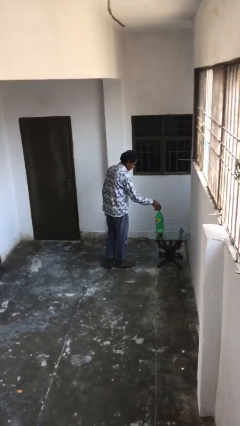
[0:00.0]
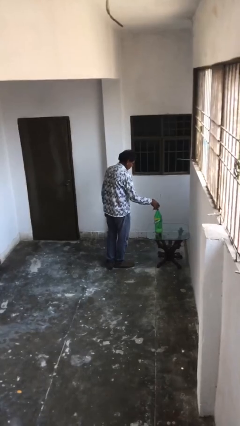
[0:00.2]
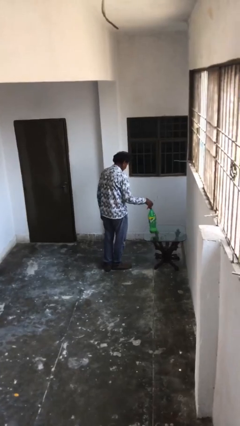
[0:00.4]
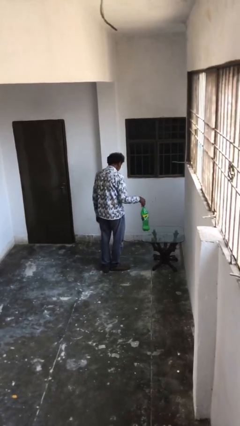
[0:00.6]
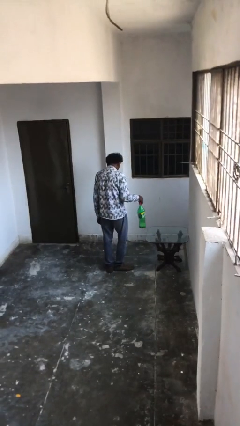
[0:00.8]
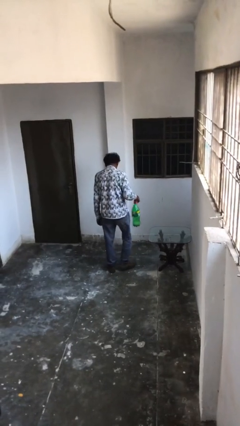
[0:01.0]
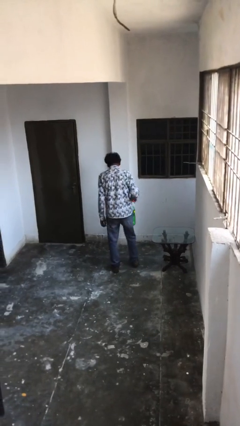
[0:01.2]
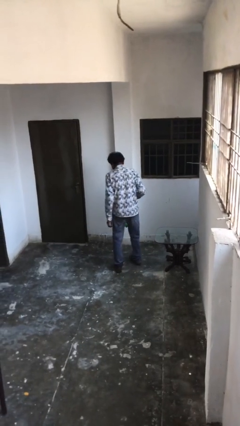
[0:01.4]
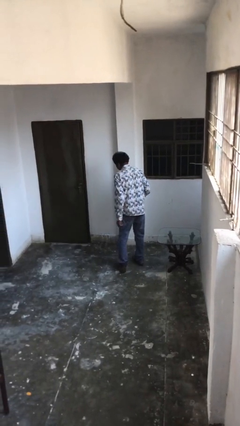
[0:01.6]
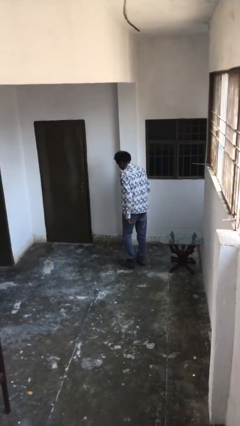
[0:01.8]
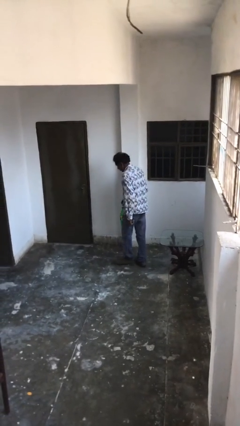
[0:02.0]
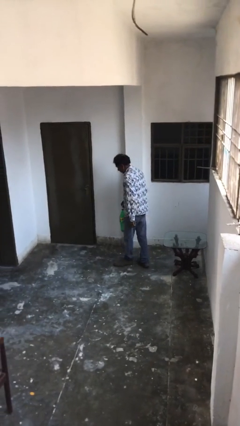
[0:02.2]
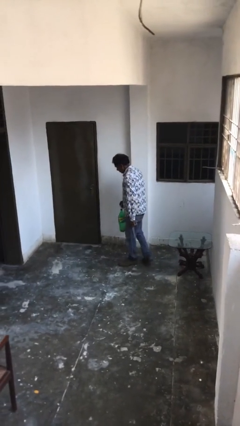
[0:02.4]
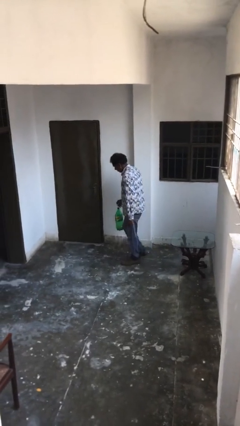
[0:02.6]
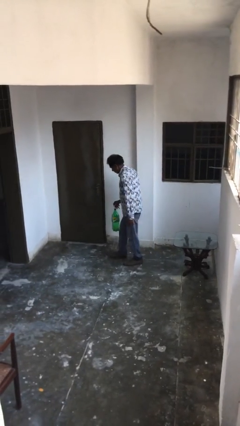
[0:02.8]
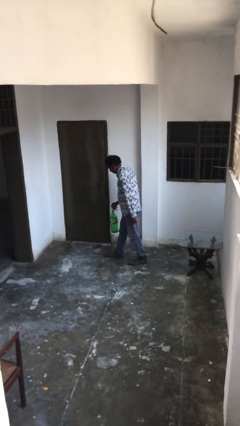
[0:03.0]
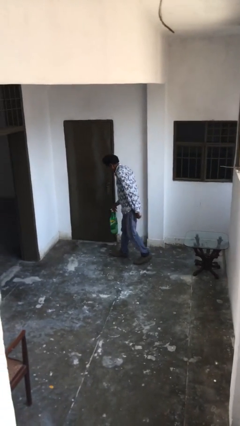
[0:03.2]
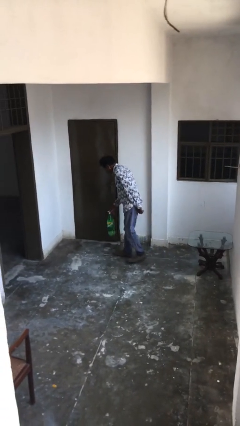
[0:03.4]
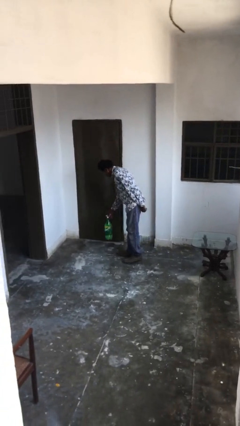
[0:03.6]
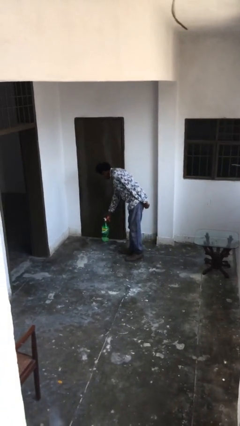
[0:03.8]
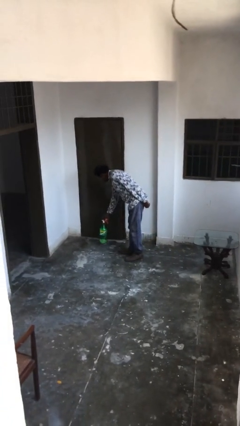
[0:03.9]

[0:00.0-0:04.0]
person picks up object from table

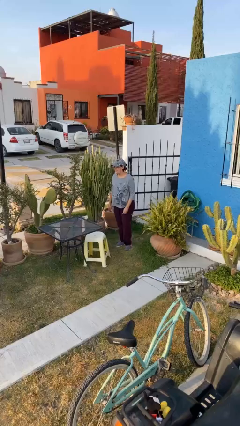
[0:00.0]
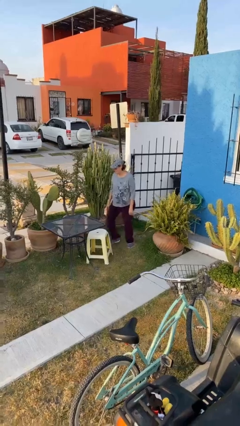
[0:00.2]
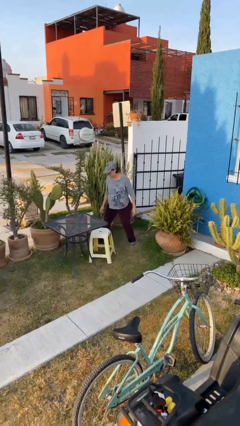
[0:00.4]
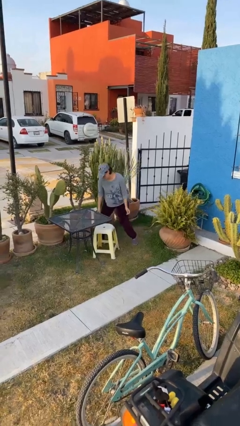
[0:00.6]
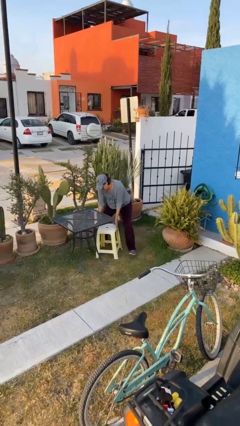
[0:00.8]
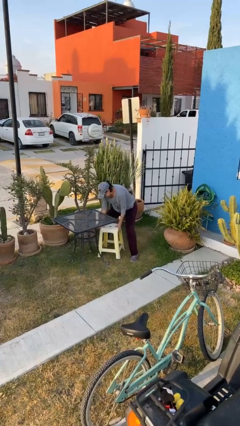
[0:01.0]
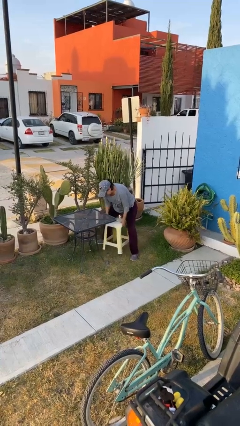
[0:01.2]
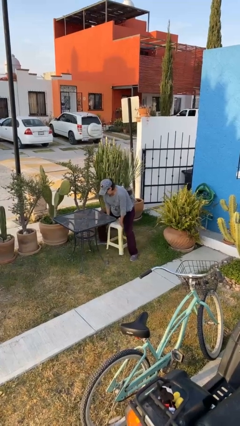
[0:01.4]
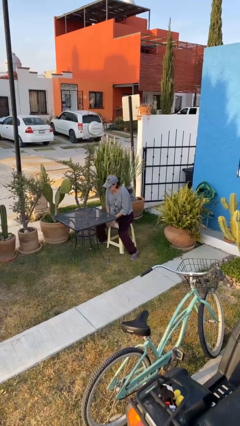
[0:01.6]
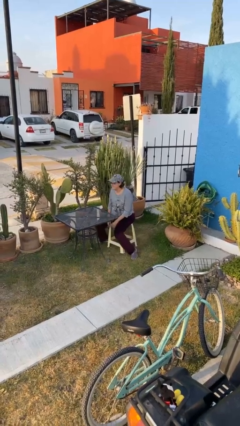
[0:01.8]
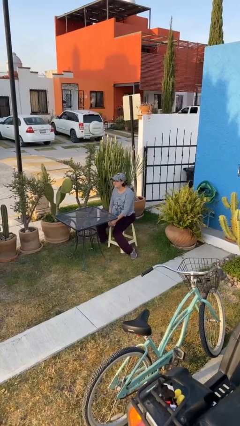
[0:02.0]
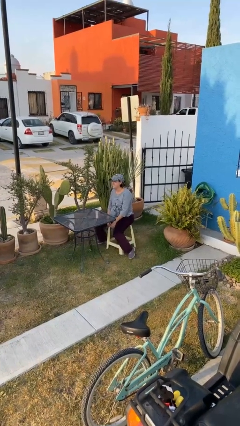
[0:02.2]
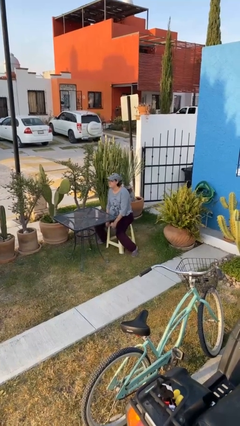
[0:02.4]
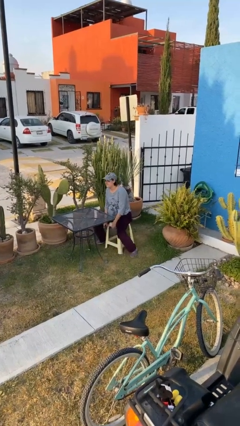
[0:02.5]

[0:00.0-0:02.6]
person sits down

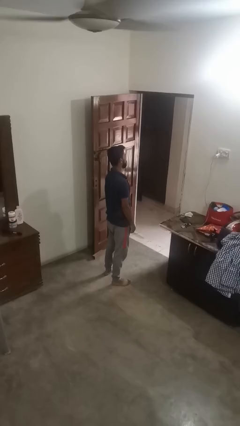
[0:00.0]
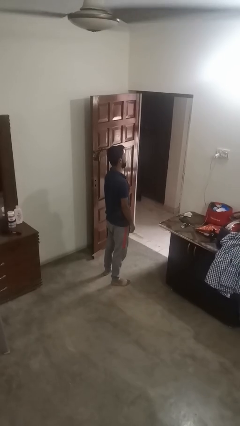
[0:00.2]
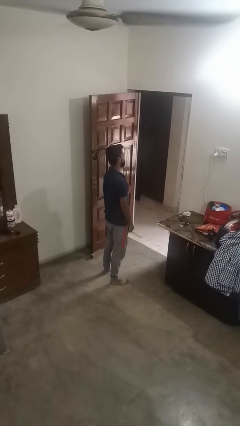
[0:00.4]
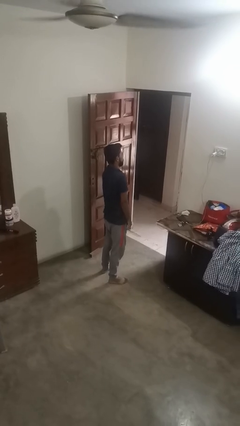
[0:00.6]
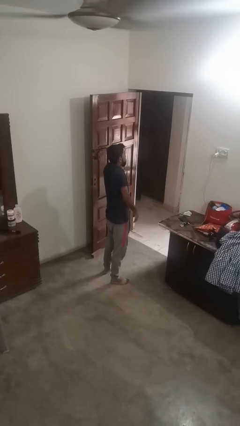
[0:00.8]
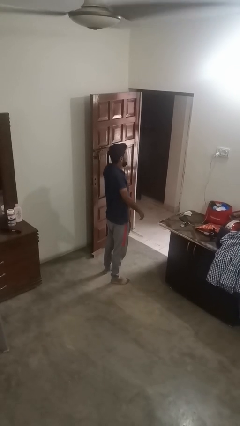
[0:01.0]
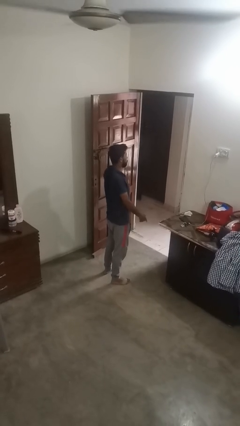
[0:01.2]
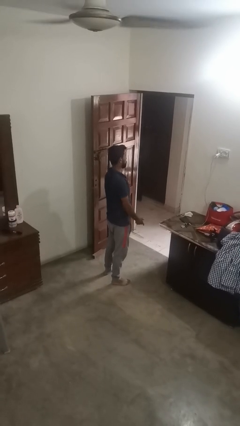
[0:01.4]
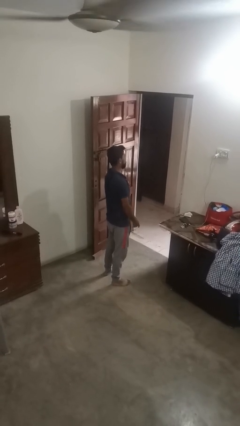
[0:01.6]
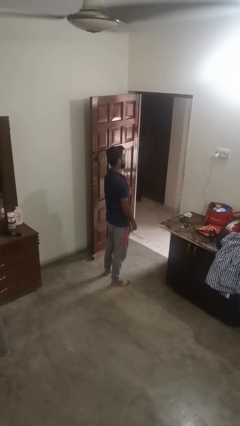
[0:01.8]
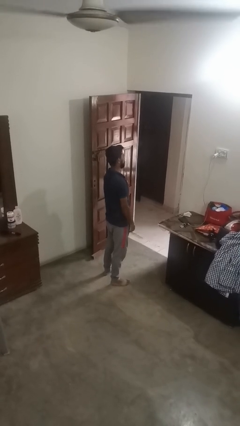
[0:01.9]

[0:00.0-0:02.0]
person shrugs

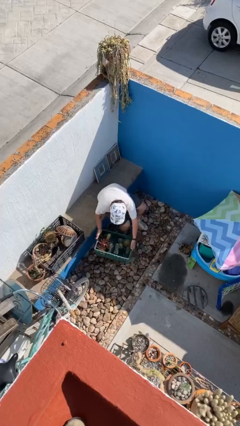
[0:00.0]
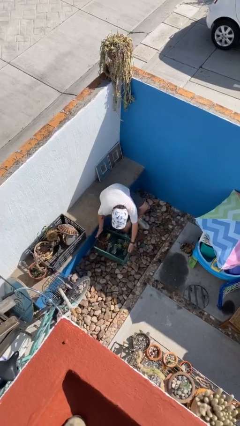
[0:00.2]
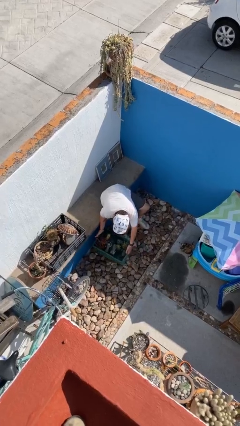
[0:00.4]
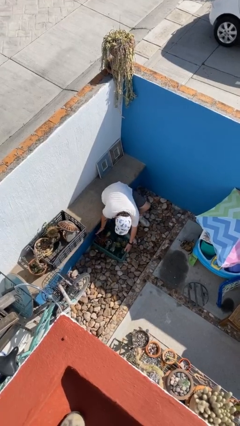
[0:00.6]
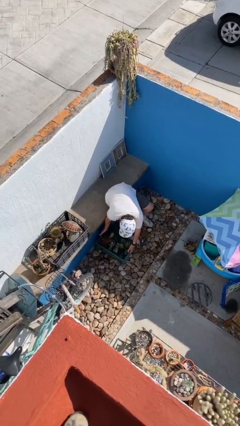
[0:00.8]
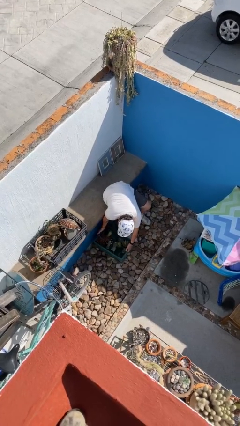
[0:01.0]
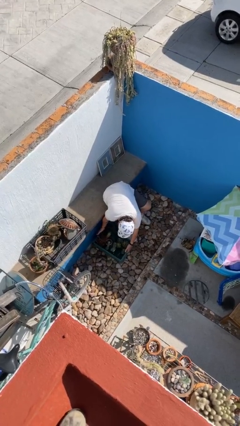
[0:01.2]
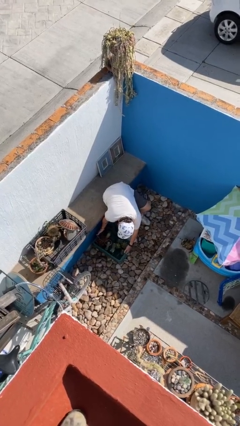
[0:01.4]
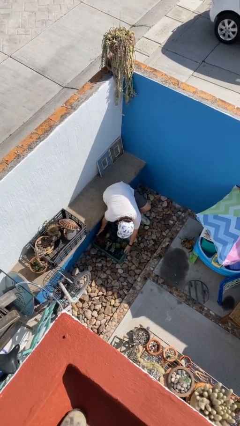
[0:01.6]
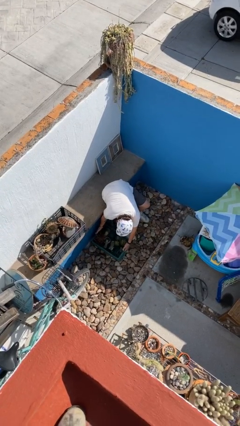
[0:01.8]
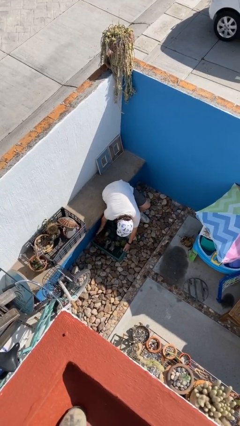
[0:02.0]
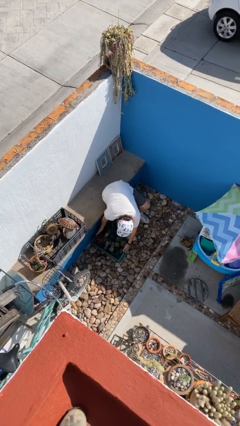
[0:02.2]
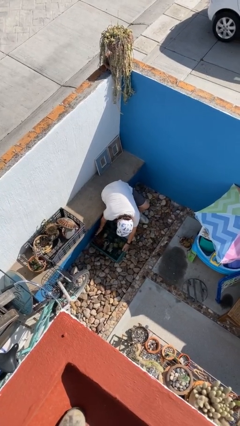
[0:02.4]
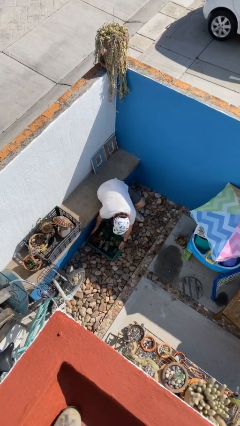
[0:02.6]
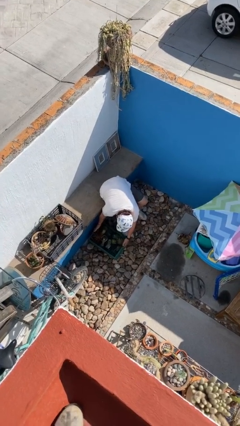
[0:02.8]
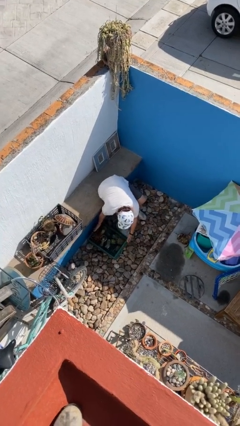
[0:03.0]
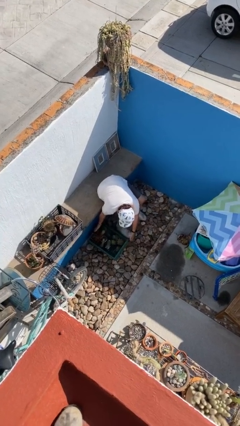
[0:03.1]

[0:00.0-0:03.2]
person puts down object on floor

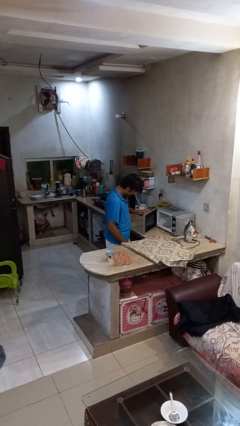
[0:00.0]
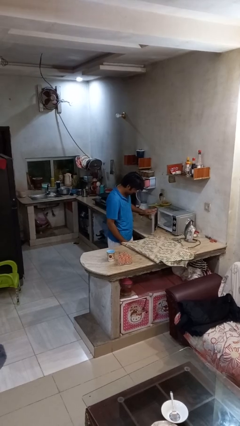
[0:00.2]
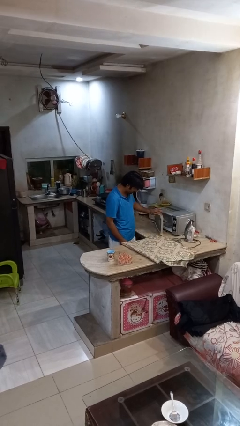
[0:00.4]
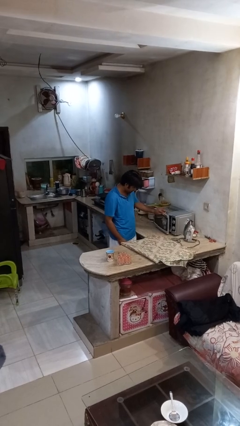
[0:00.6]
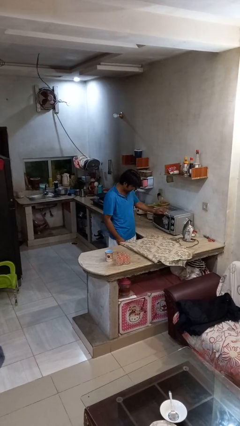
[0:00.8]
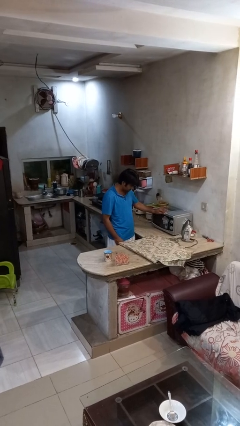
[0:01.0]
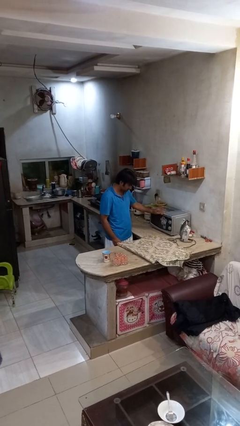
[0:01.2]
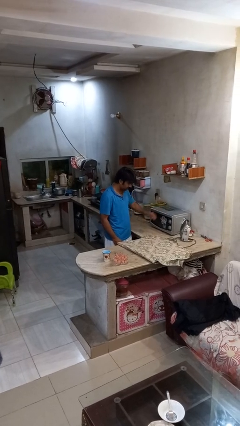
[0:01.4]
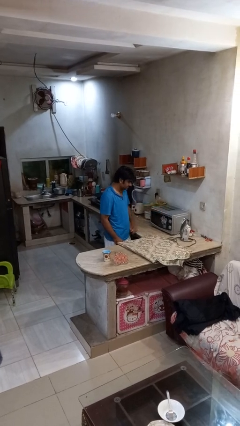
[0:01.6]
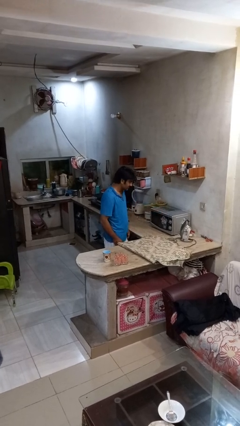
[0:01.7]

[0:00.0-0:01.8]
person closes microwave

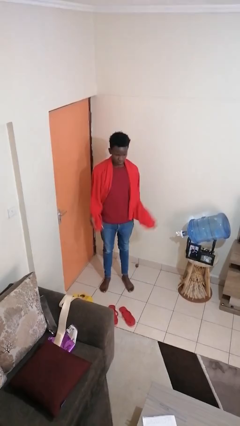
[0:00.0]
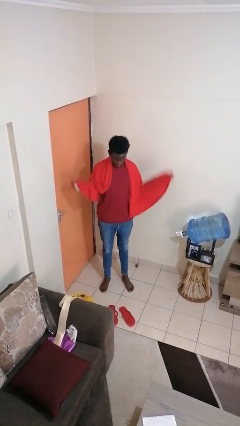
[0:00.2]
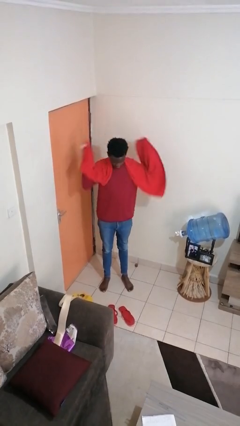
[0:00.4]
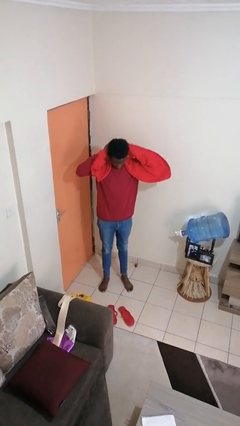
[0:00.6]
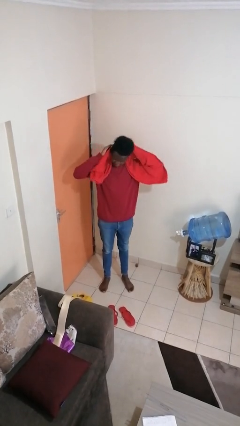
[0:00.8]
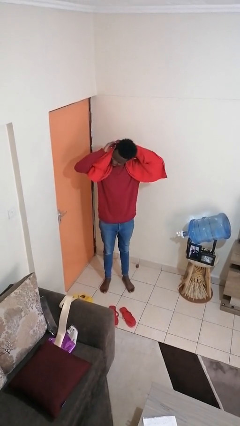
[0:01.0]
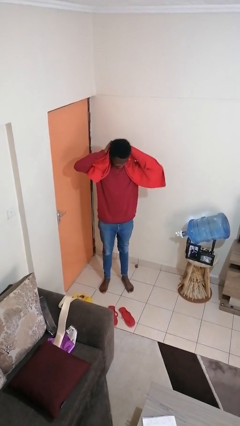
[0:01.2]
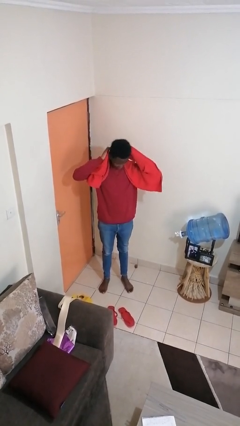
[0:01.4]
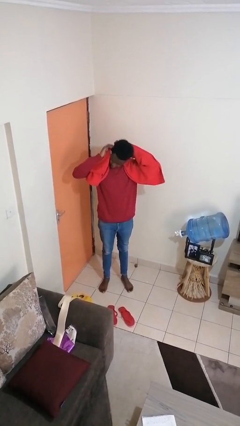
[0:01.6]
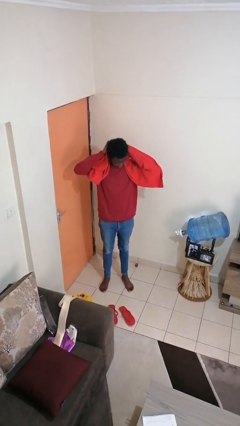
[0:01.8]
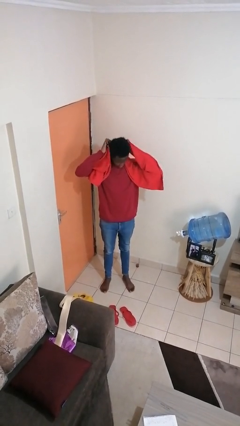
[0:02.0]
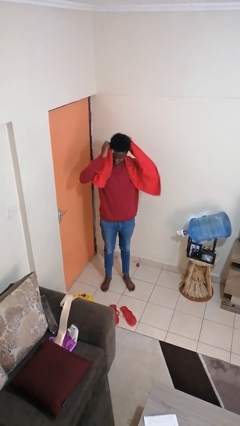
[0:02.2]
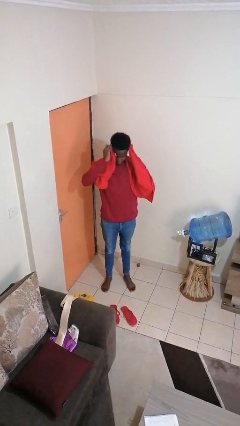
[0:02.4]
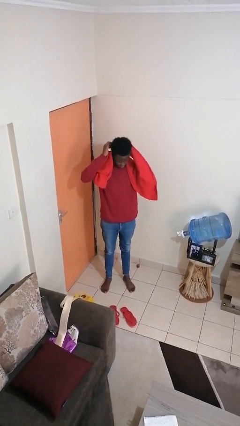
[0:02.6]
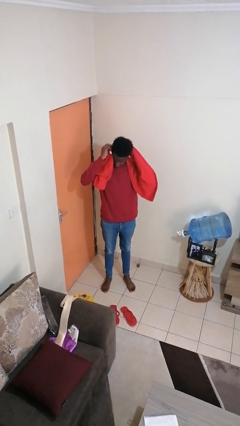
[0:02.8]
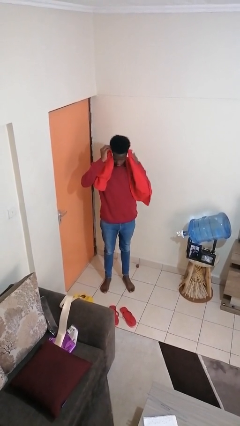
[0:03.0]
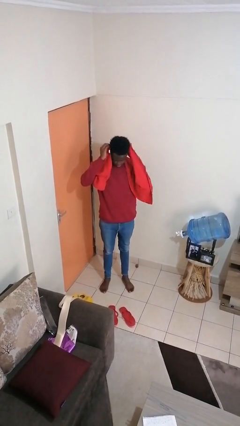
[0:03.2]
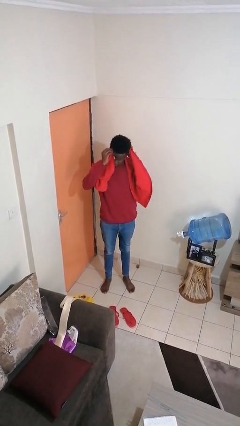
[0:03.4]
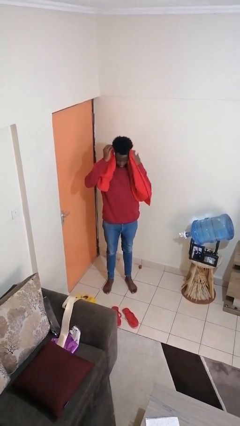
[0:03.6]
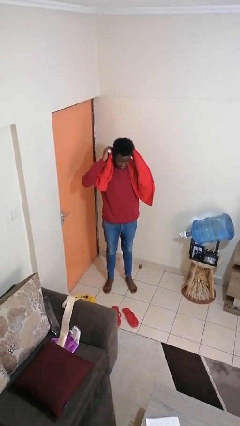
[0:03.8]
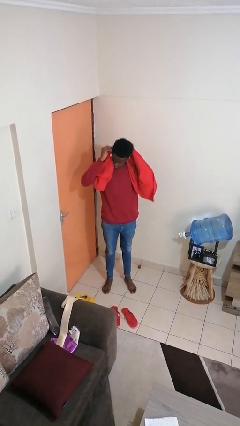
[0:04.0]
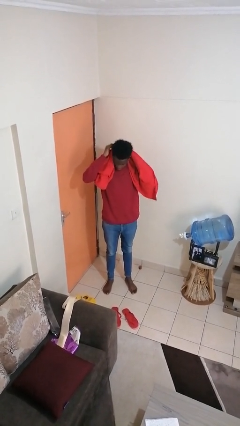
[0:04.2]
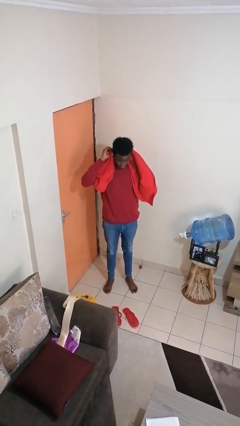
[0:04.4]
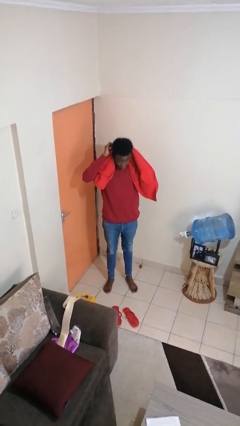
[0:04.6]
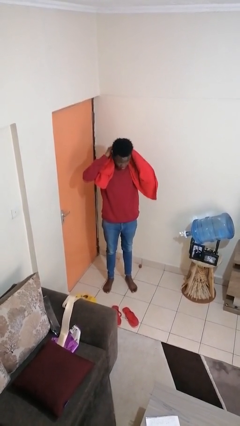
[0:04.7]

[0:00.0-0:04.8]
person dries hair with towel
